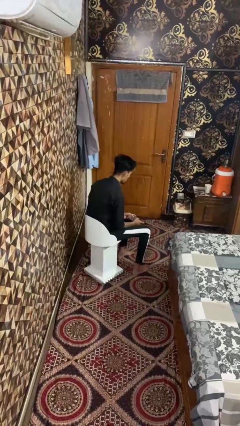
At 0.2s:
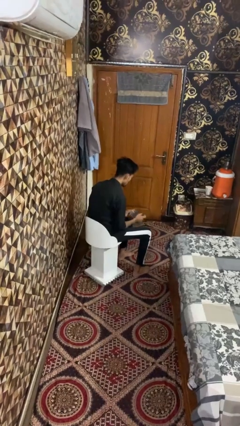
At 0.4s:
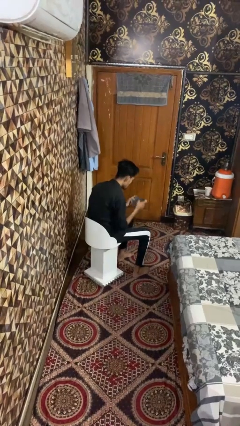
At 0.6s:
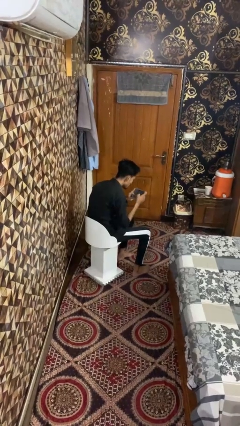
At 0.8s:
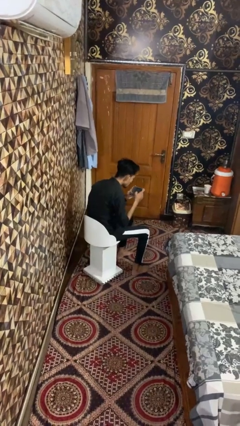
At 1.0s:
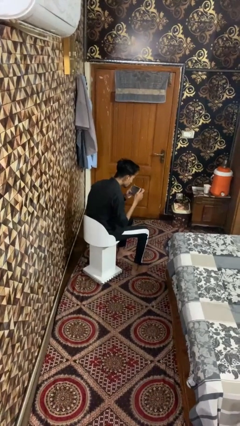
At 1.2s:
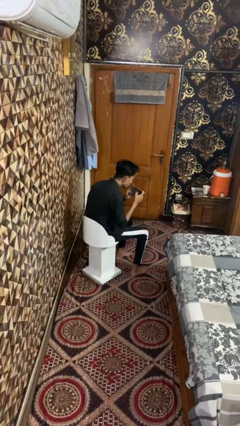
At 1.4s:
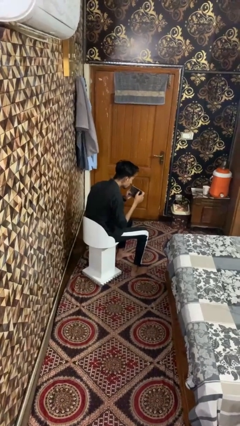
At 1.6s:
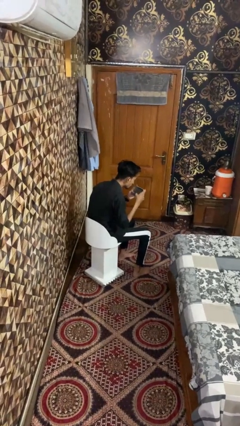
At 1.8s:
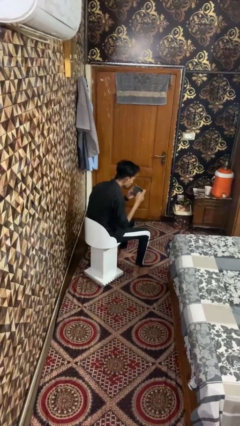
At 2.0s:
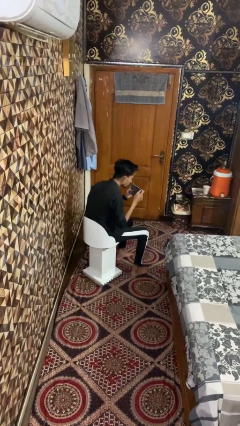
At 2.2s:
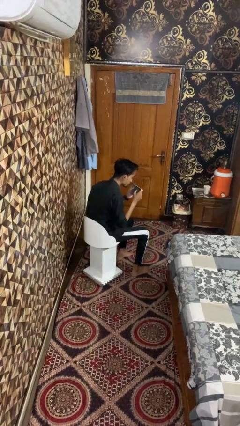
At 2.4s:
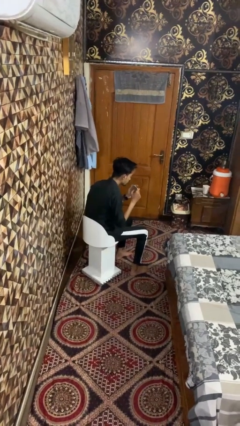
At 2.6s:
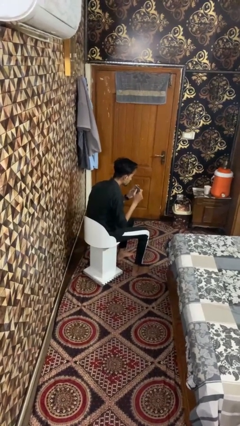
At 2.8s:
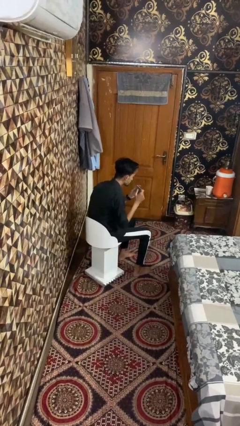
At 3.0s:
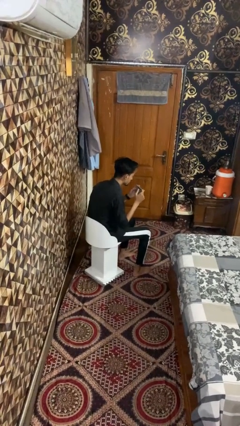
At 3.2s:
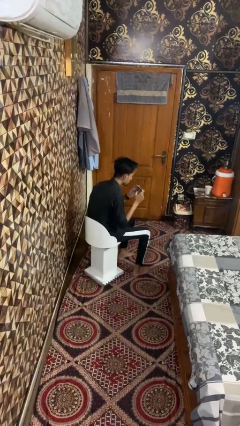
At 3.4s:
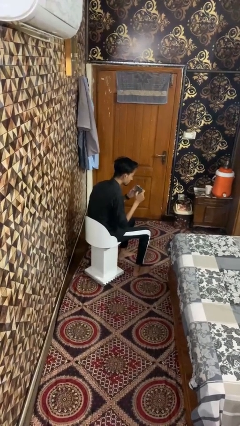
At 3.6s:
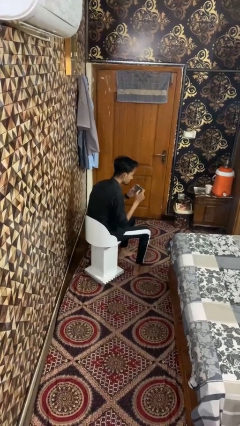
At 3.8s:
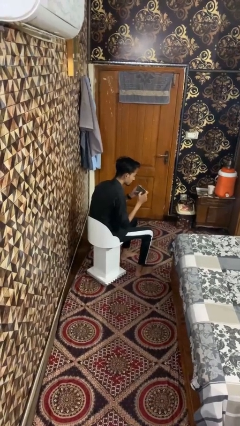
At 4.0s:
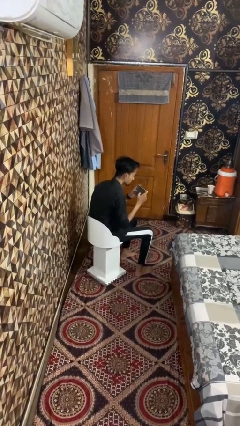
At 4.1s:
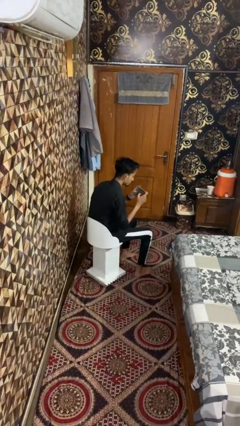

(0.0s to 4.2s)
person taps object with finger

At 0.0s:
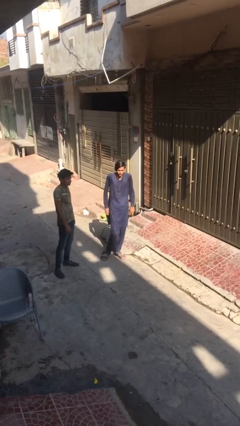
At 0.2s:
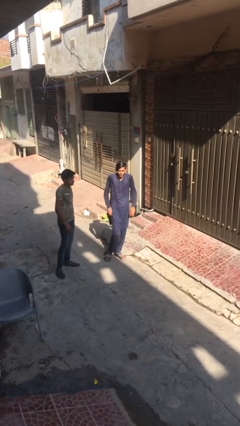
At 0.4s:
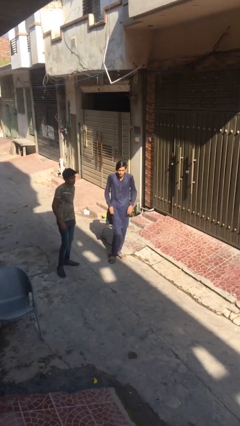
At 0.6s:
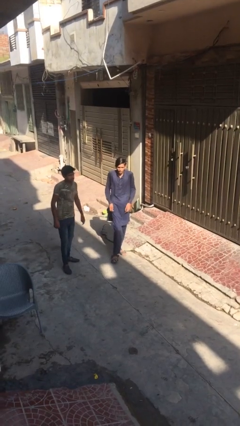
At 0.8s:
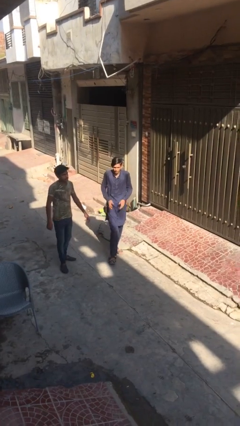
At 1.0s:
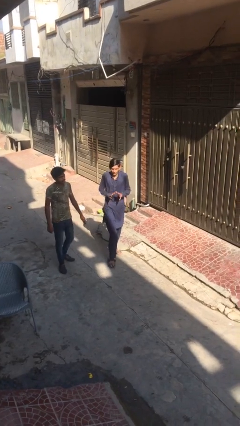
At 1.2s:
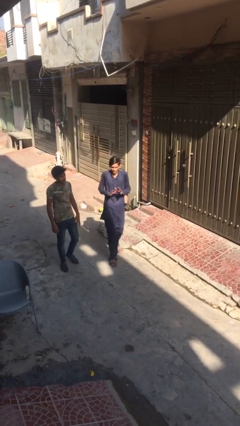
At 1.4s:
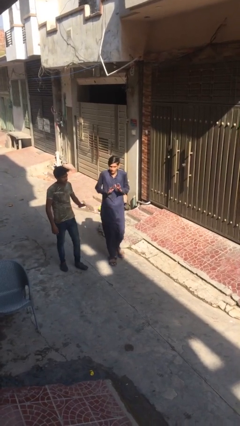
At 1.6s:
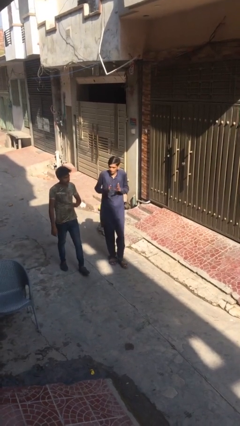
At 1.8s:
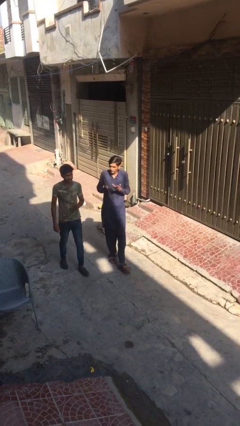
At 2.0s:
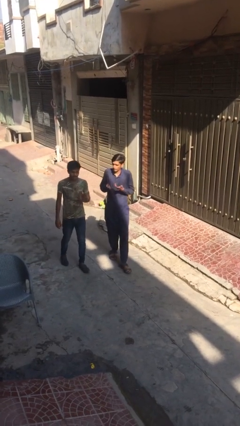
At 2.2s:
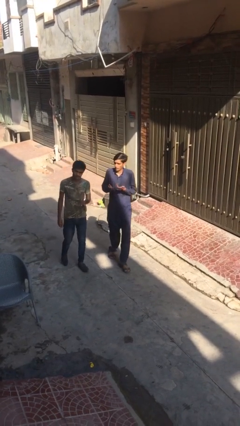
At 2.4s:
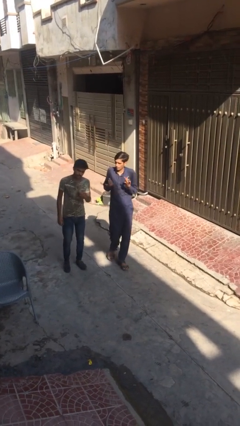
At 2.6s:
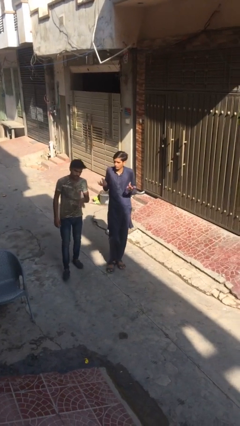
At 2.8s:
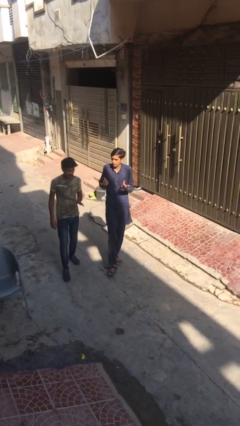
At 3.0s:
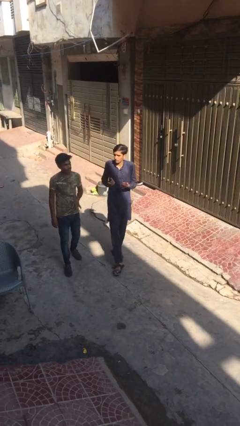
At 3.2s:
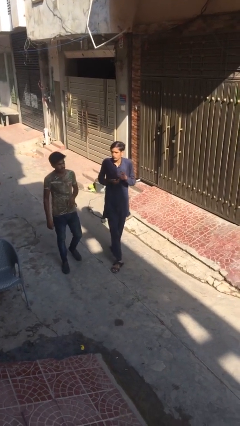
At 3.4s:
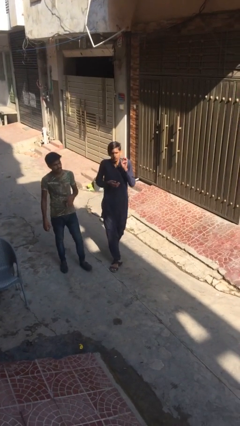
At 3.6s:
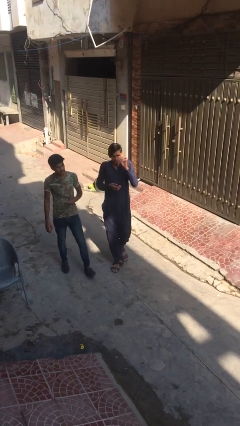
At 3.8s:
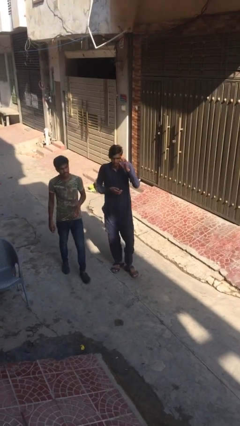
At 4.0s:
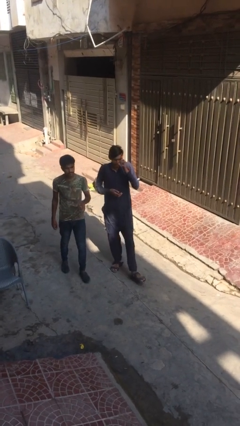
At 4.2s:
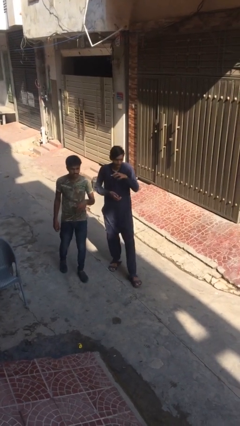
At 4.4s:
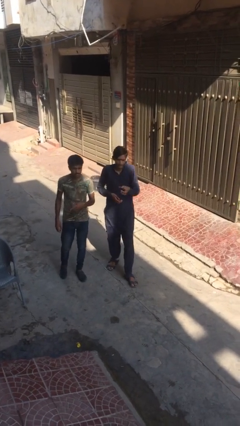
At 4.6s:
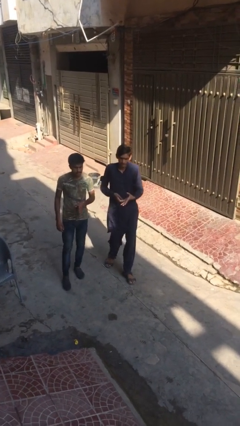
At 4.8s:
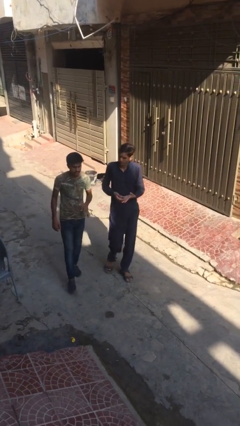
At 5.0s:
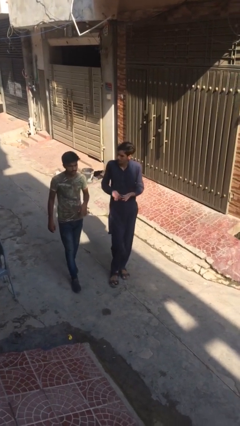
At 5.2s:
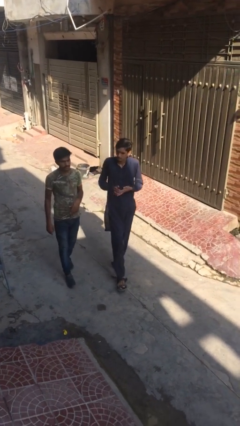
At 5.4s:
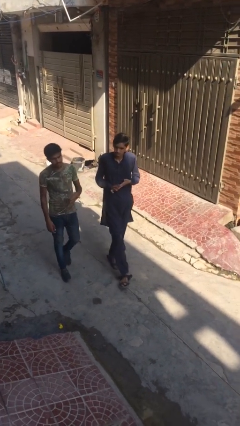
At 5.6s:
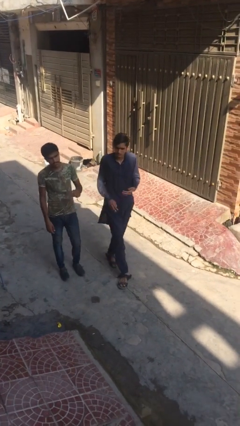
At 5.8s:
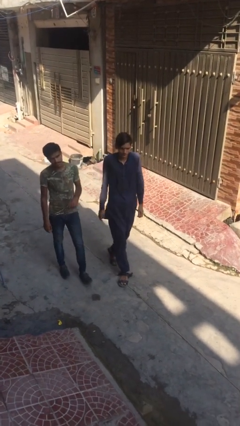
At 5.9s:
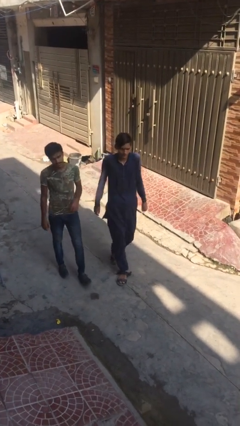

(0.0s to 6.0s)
person talks to person

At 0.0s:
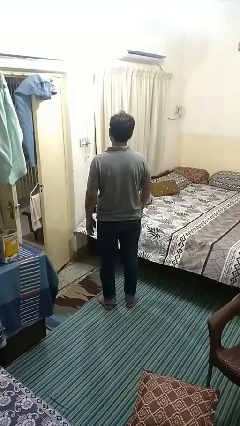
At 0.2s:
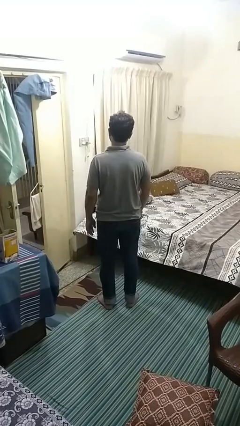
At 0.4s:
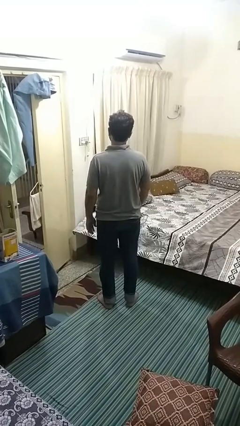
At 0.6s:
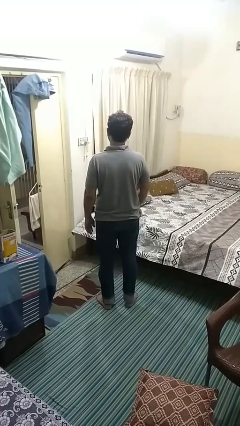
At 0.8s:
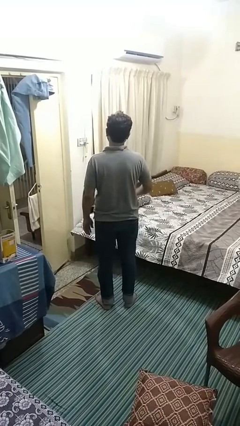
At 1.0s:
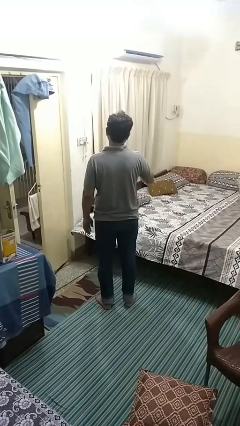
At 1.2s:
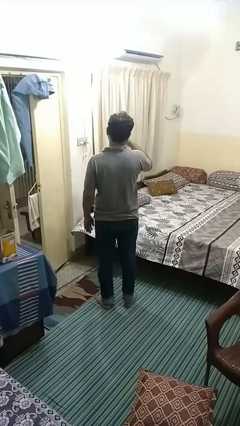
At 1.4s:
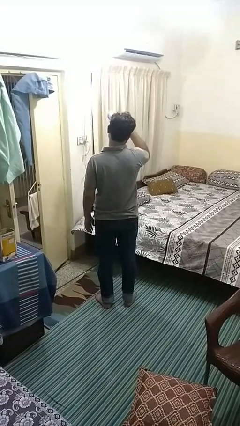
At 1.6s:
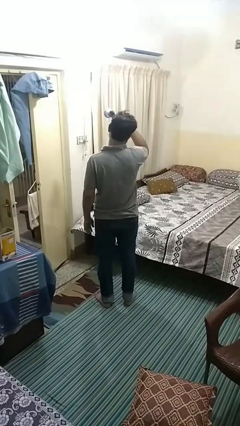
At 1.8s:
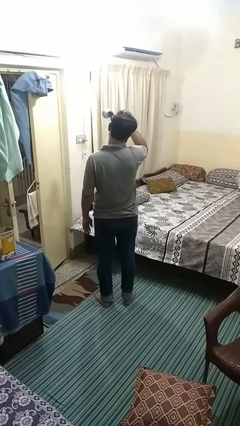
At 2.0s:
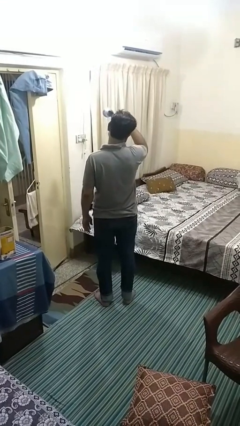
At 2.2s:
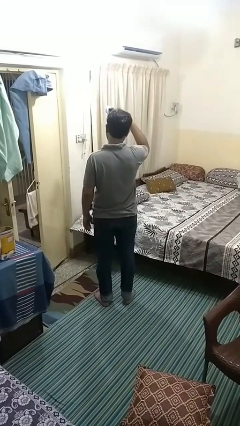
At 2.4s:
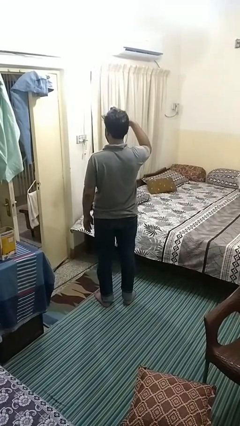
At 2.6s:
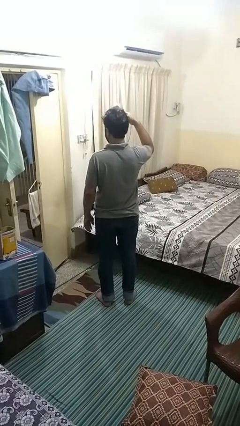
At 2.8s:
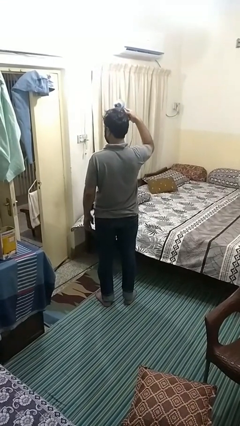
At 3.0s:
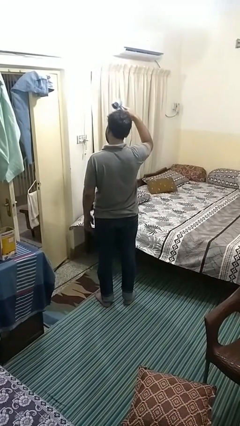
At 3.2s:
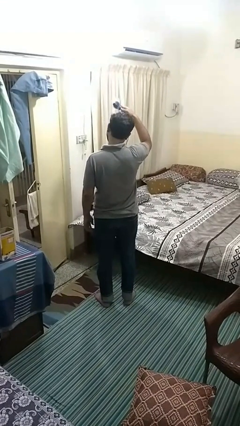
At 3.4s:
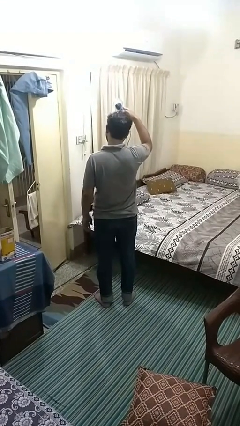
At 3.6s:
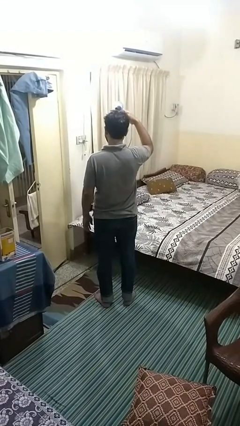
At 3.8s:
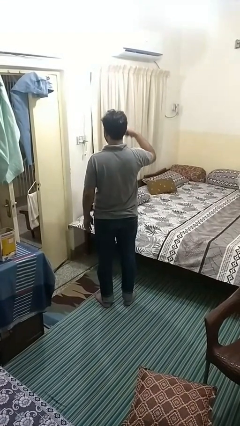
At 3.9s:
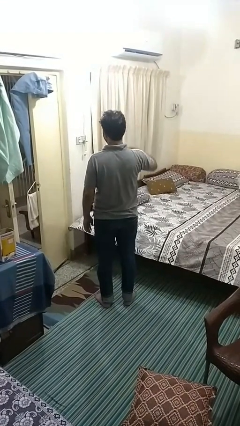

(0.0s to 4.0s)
person dries hair with hairdryer

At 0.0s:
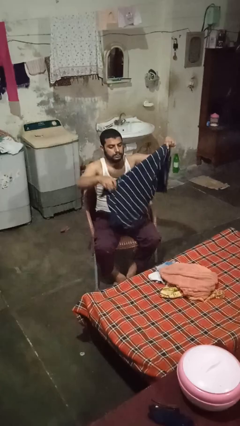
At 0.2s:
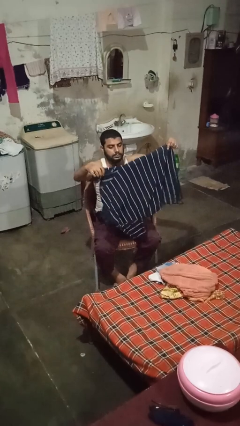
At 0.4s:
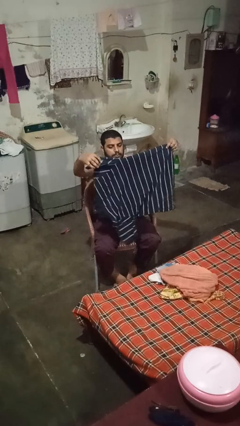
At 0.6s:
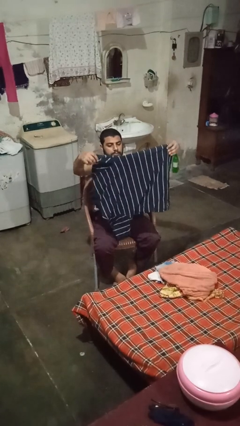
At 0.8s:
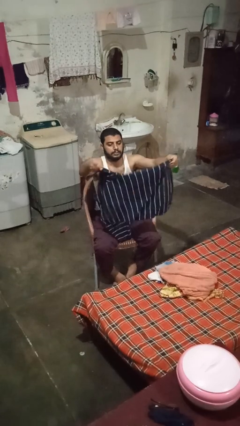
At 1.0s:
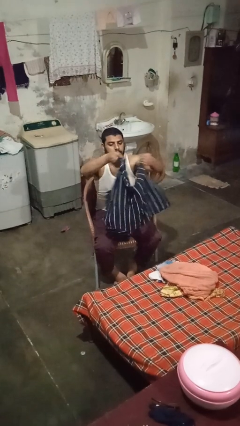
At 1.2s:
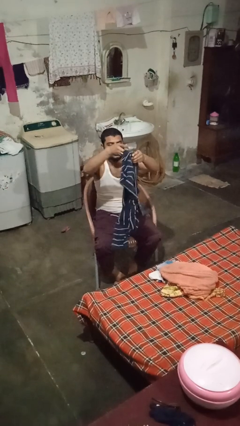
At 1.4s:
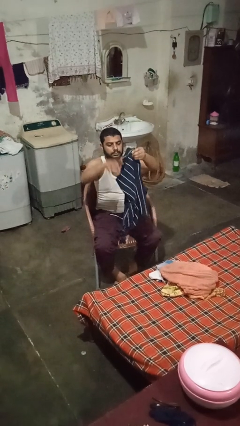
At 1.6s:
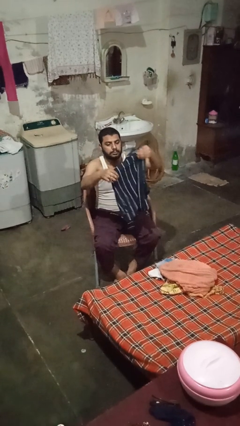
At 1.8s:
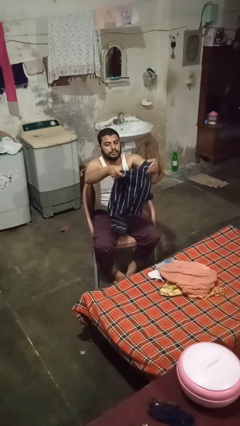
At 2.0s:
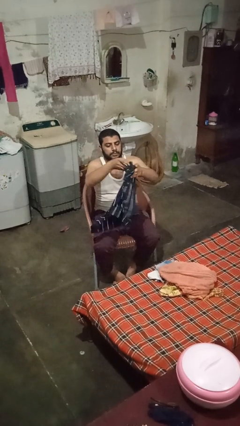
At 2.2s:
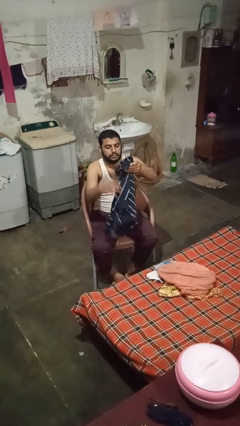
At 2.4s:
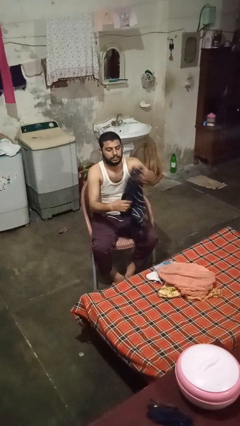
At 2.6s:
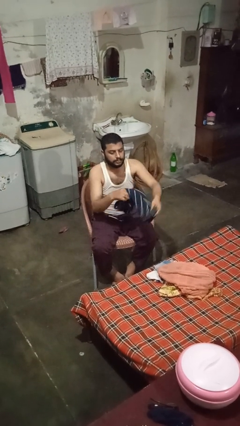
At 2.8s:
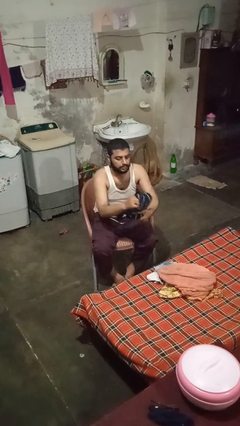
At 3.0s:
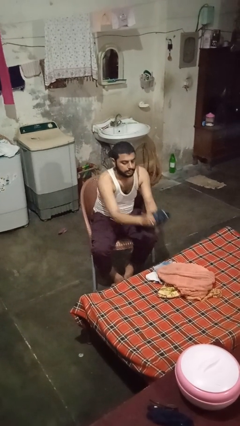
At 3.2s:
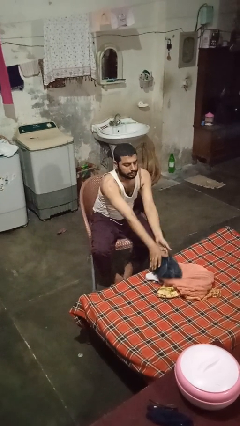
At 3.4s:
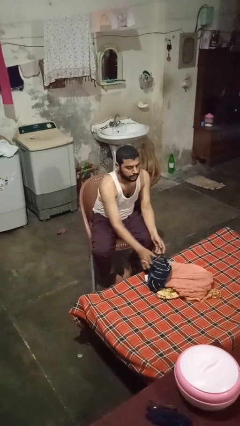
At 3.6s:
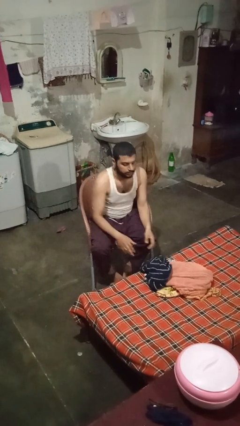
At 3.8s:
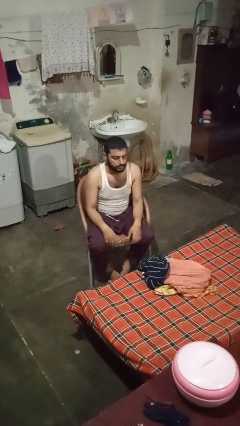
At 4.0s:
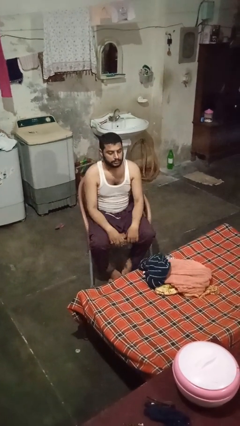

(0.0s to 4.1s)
person folds shirt
